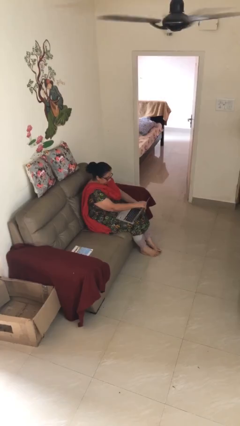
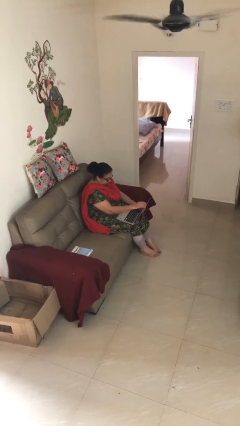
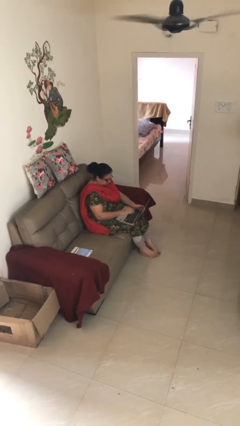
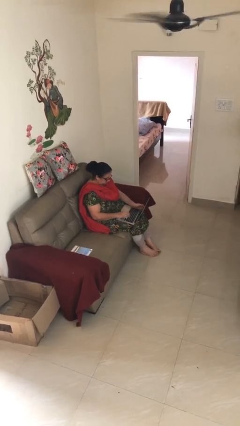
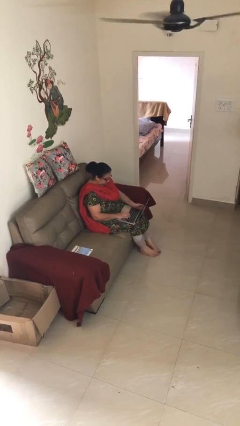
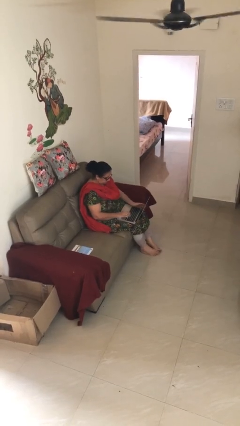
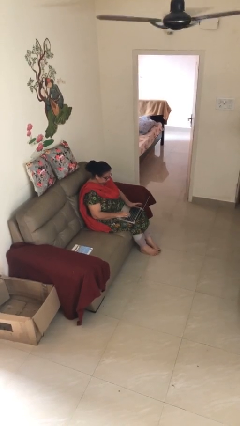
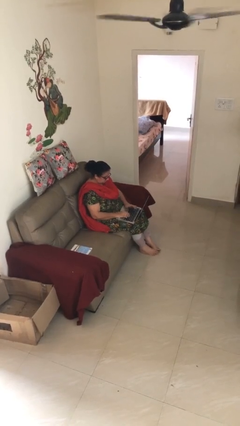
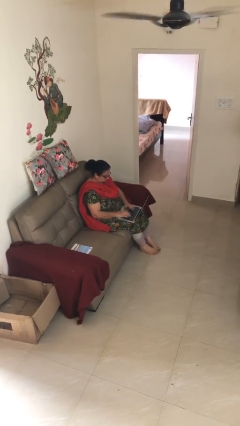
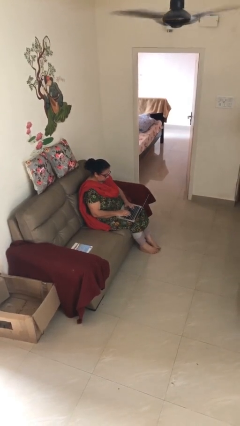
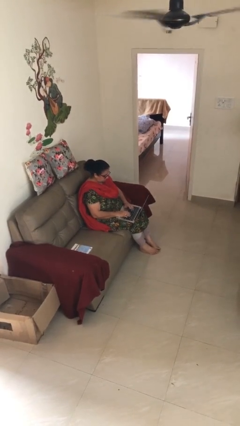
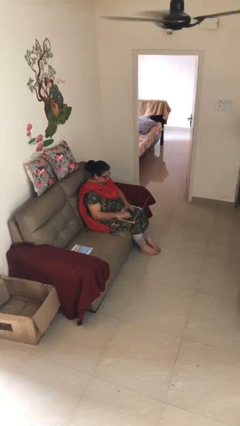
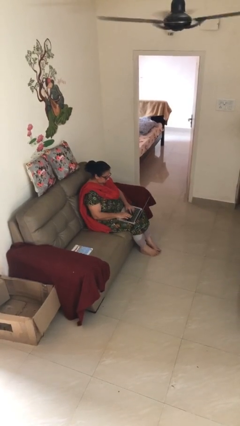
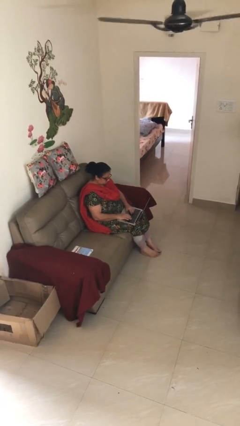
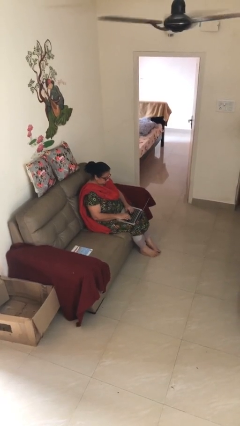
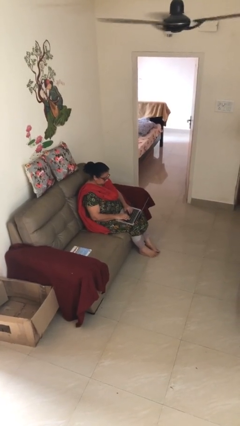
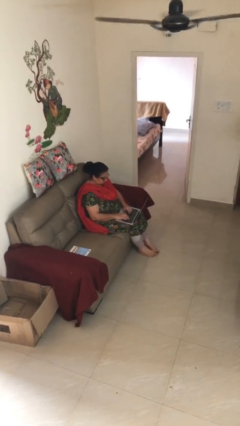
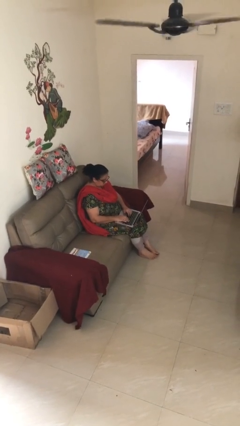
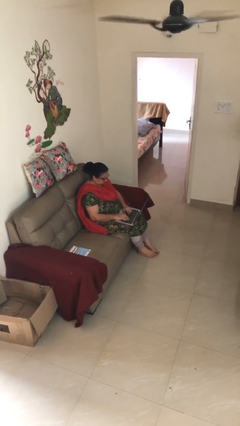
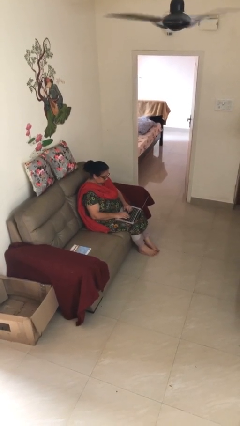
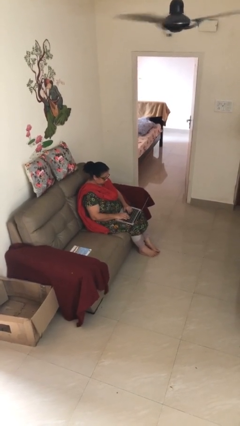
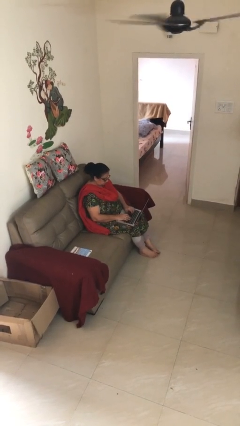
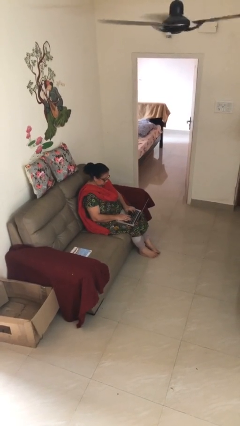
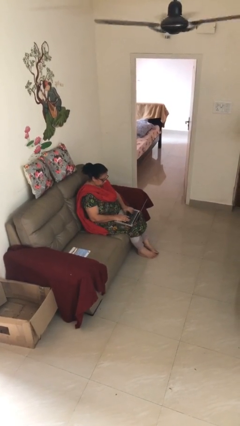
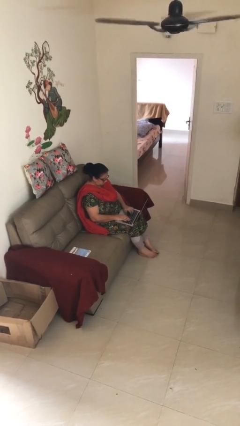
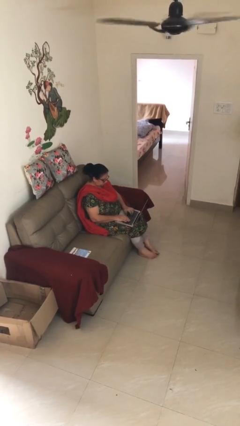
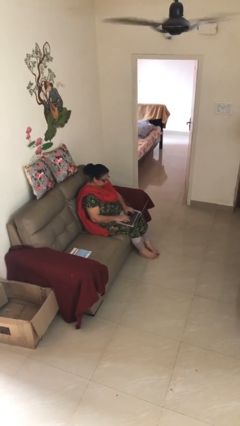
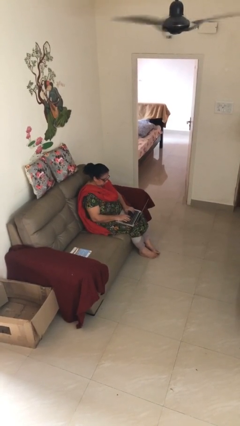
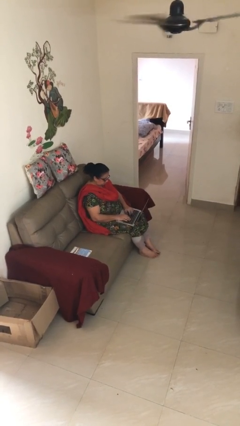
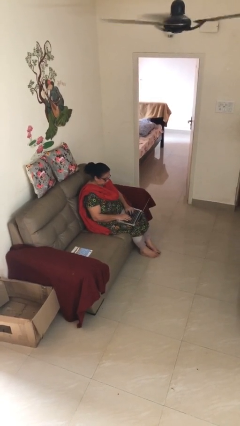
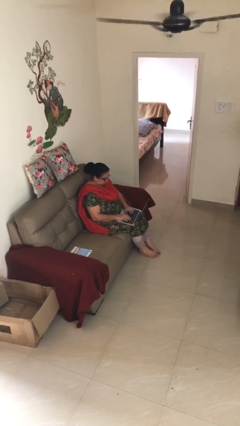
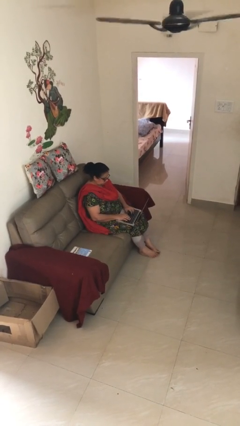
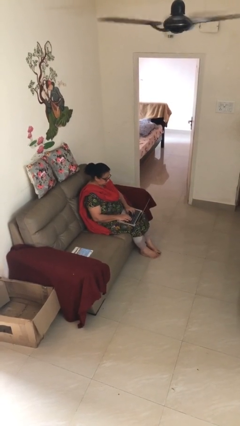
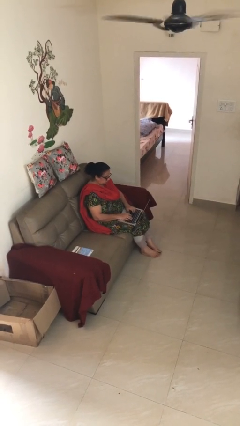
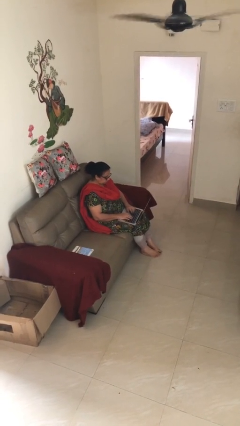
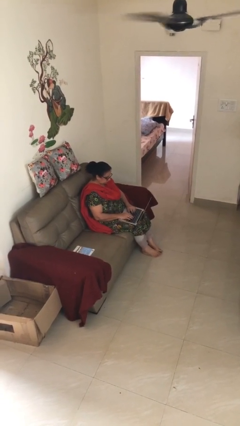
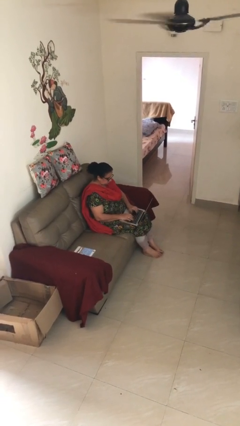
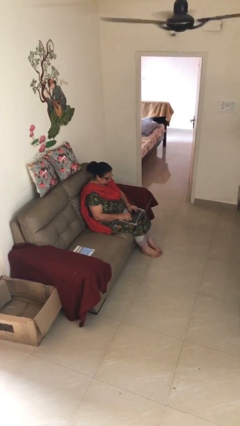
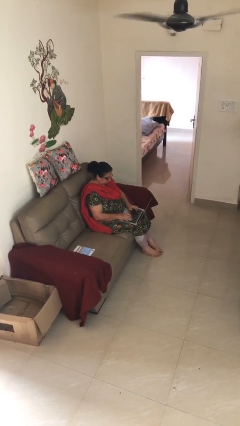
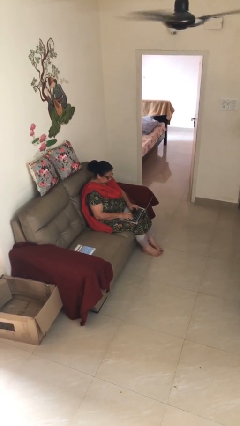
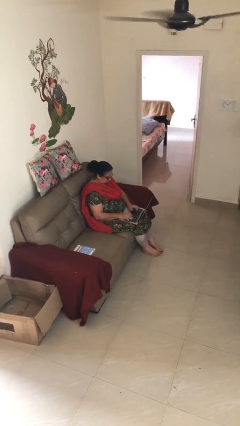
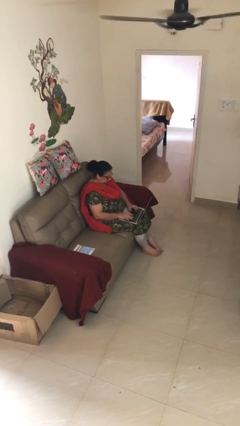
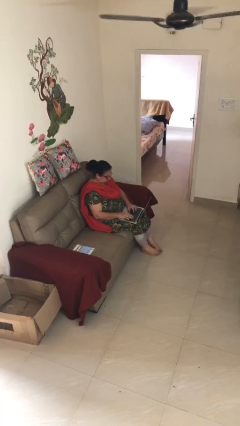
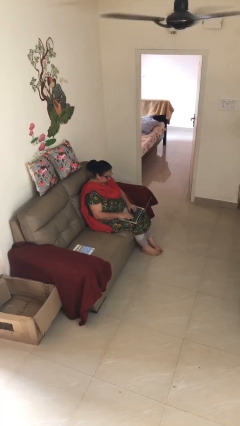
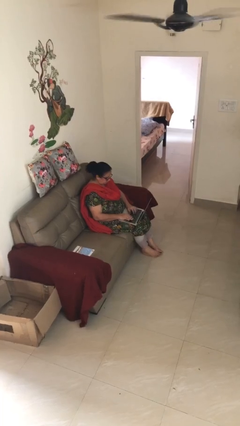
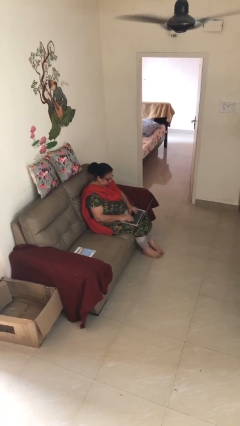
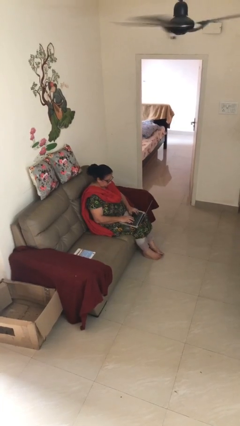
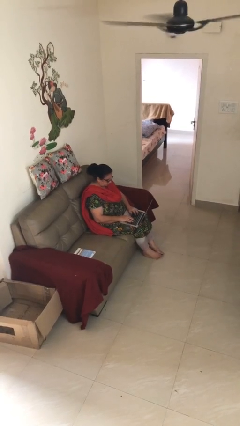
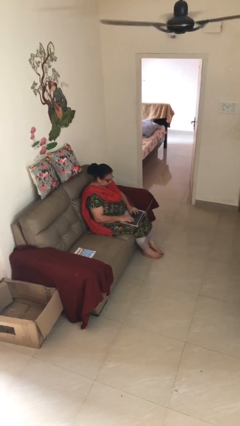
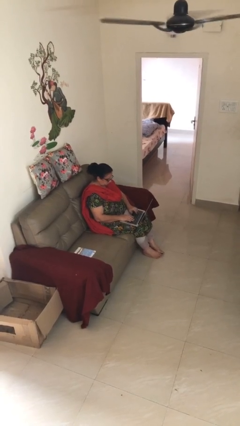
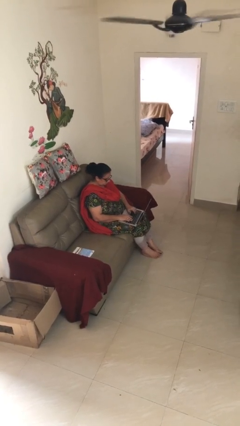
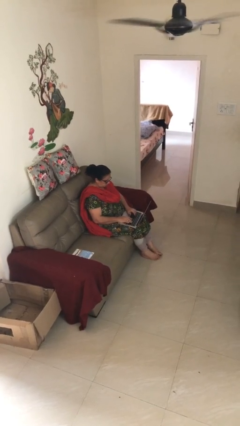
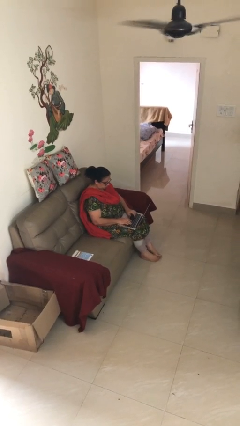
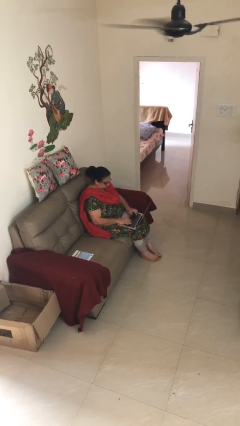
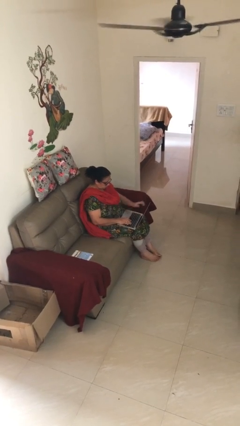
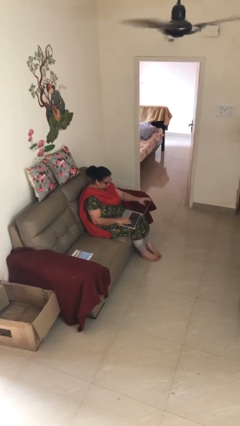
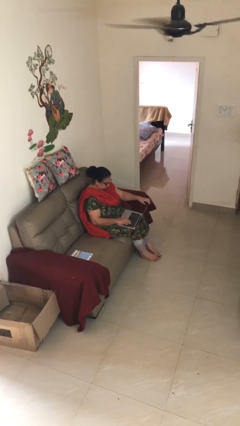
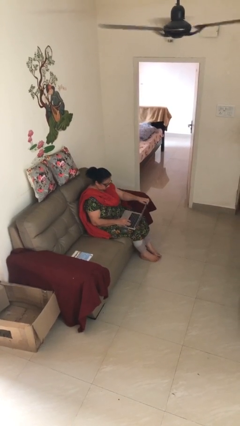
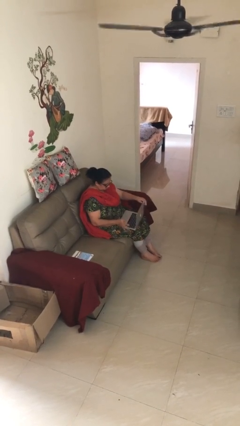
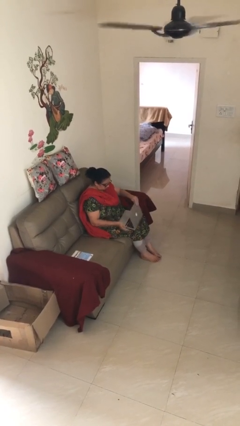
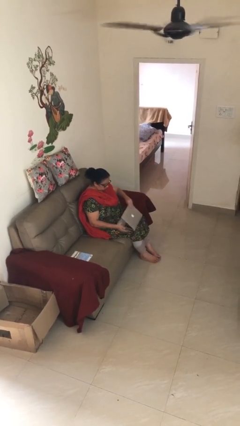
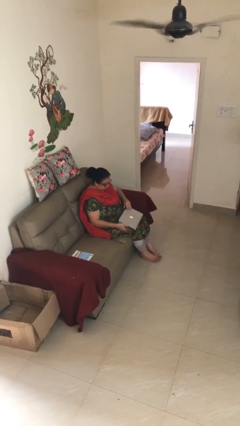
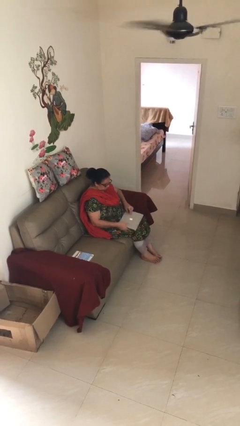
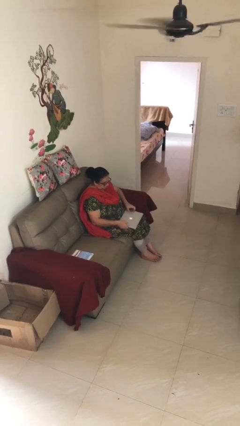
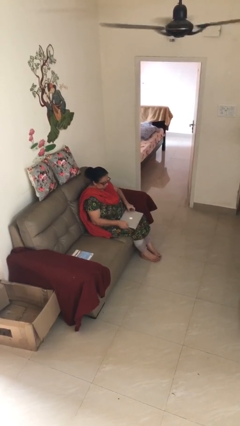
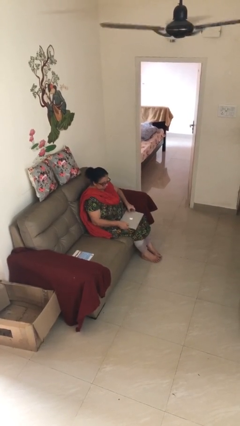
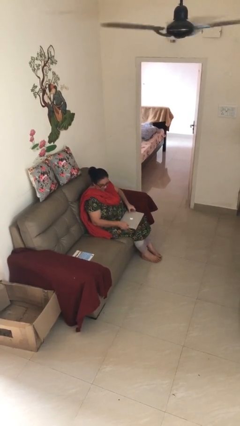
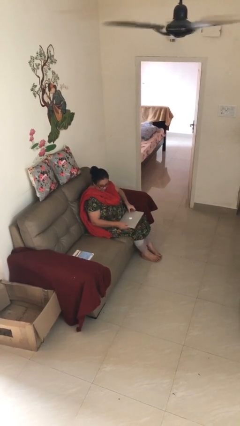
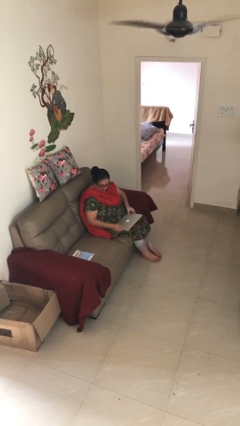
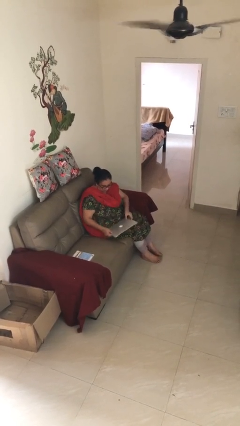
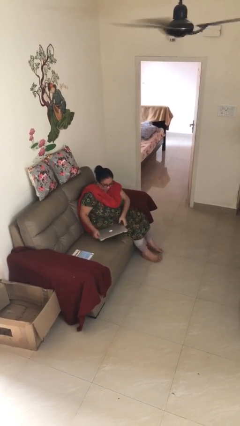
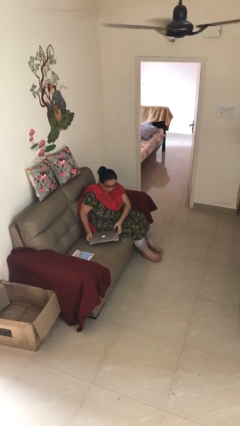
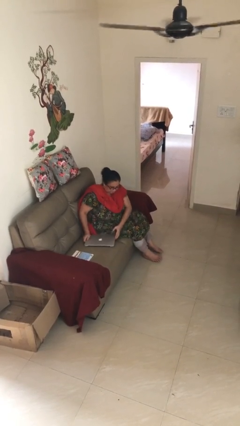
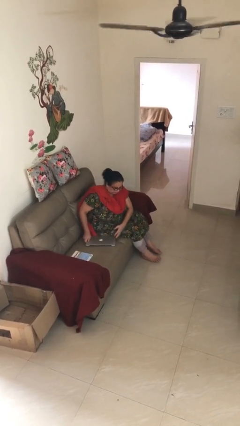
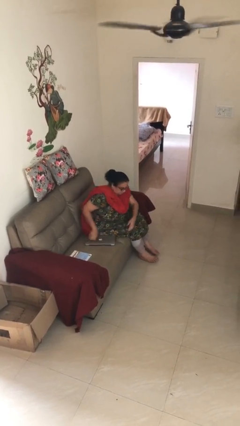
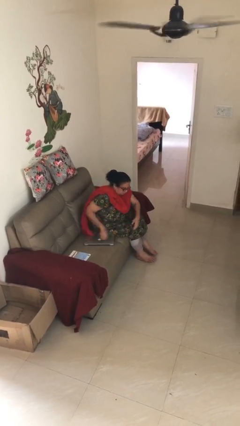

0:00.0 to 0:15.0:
person interacts with laptop

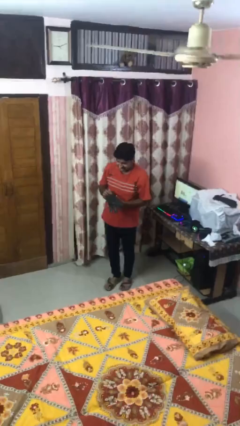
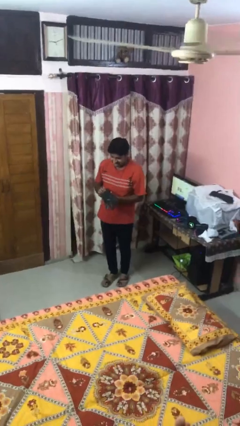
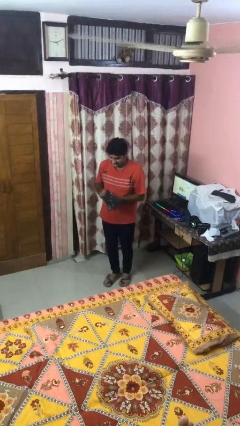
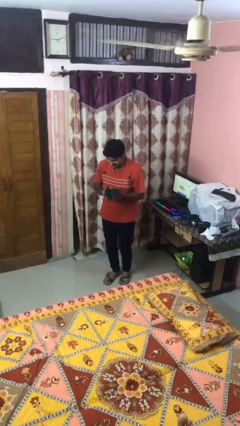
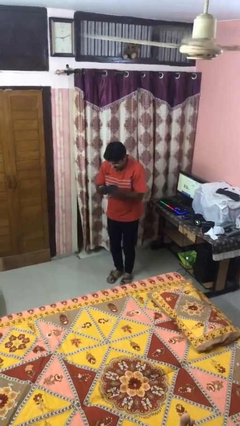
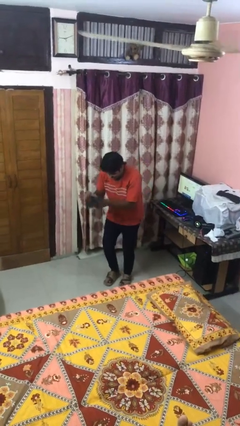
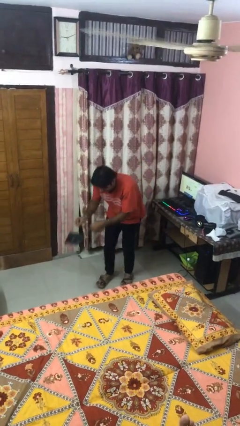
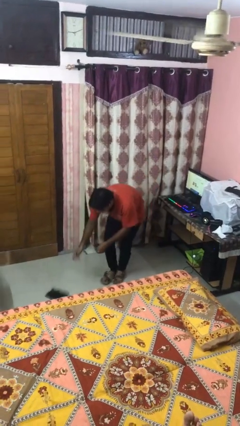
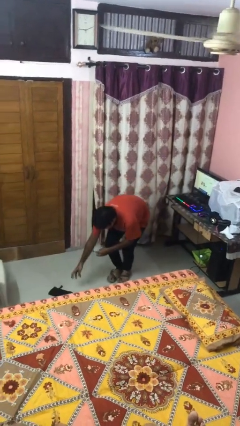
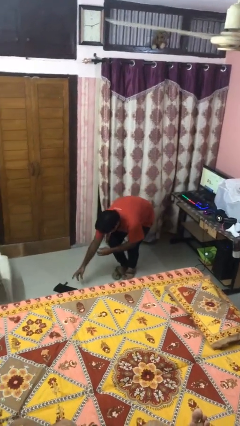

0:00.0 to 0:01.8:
person drops object

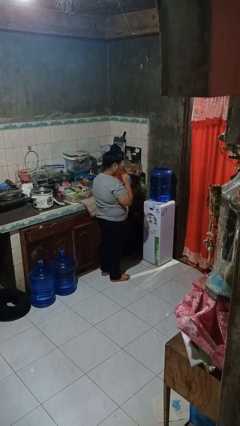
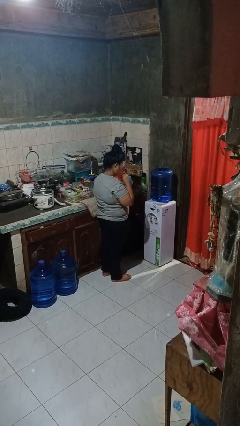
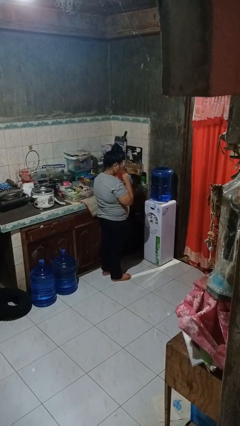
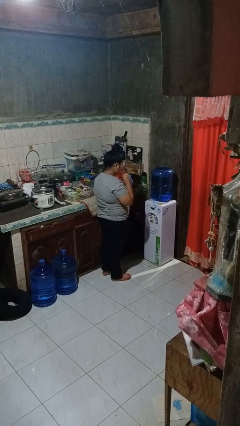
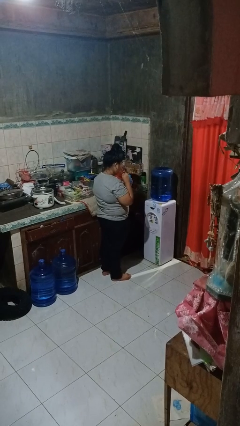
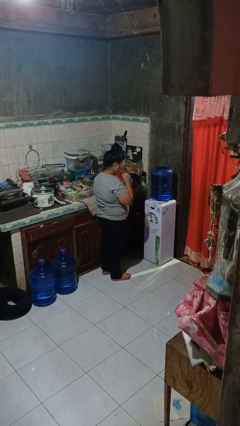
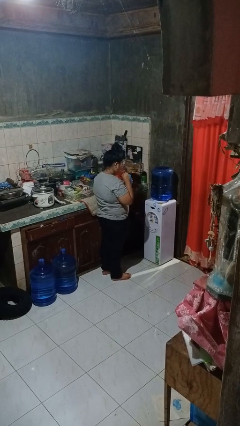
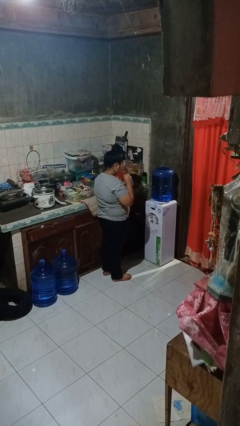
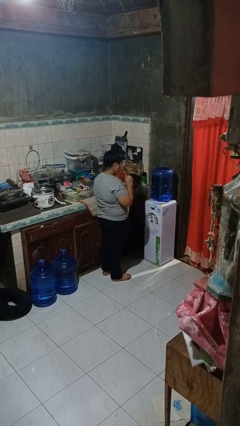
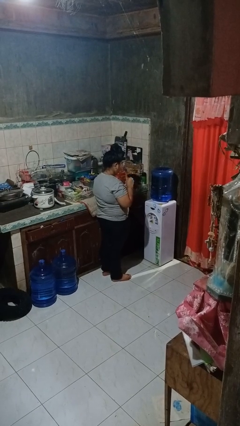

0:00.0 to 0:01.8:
person drinks from straw
